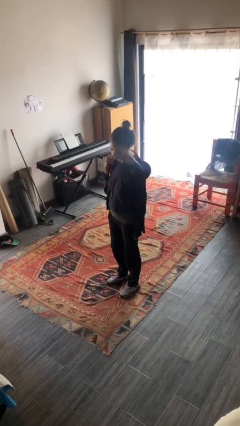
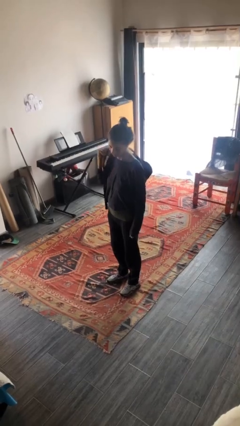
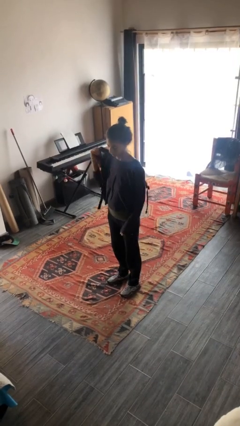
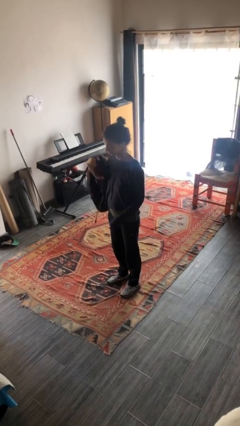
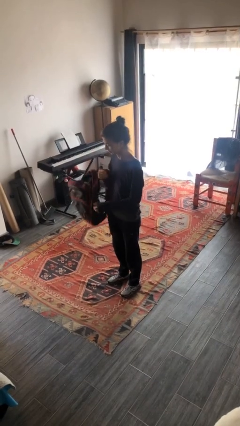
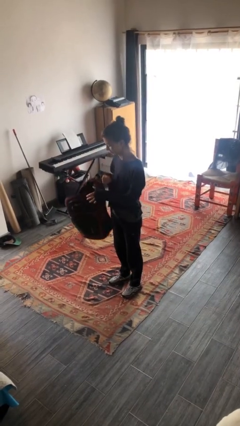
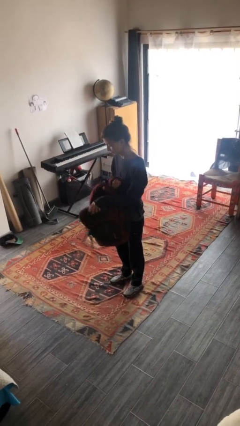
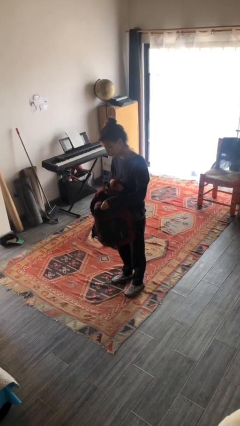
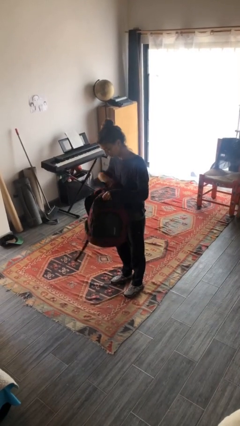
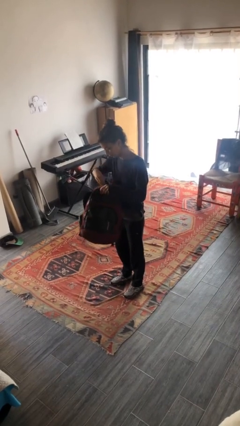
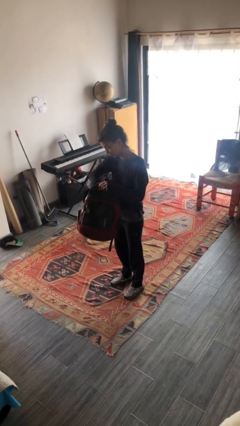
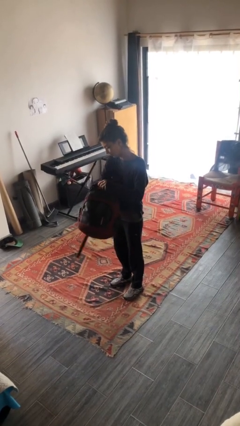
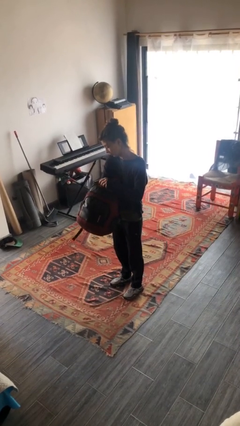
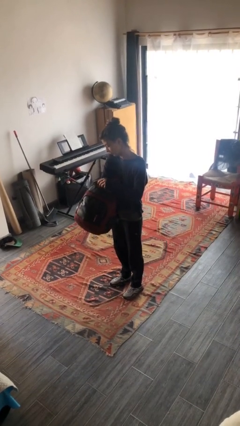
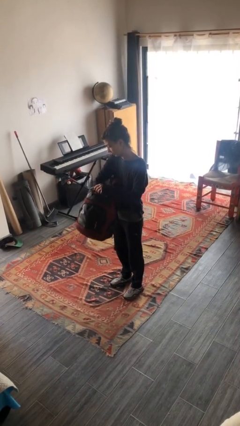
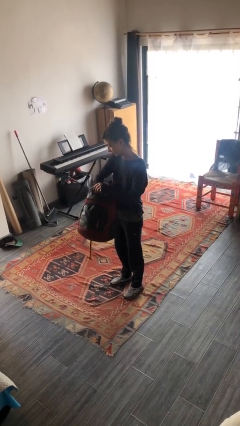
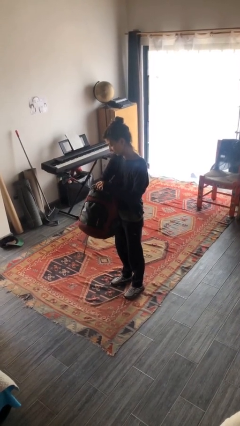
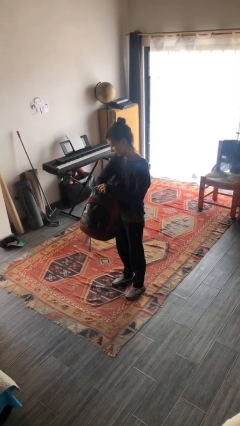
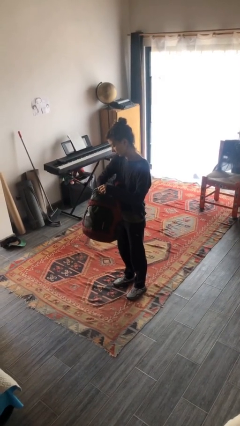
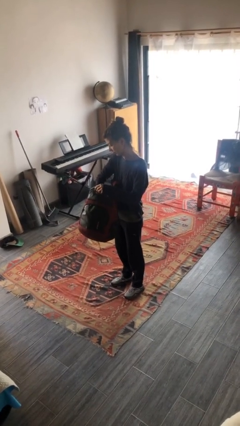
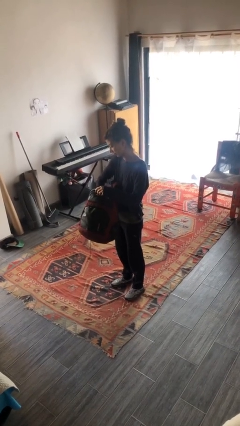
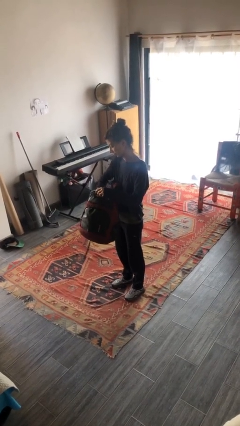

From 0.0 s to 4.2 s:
person searches in backpack

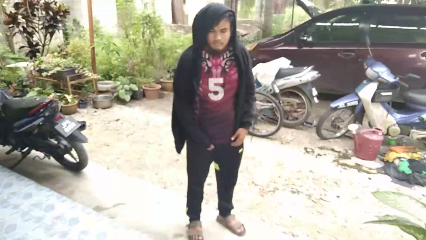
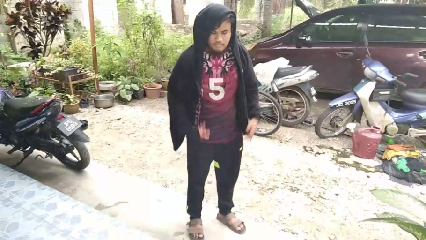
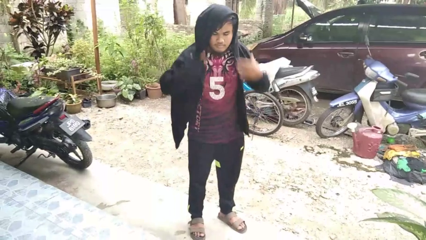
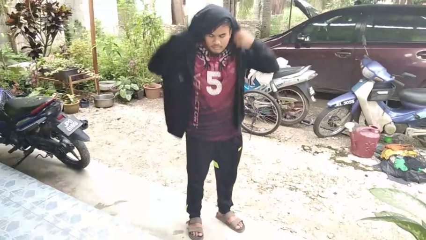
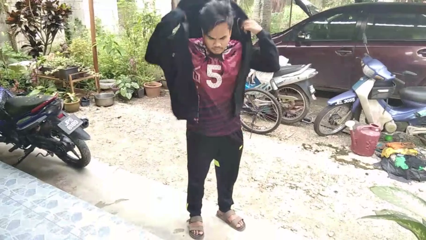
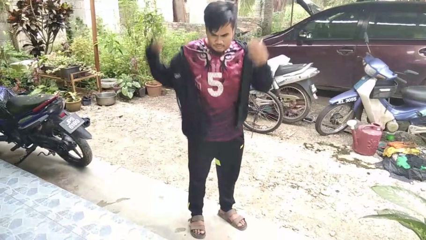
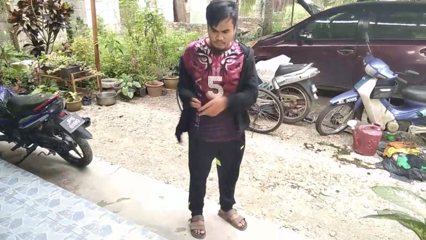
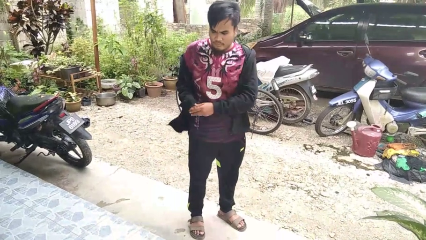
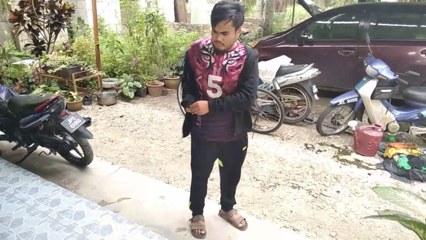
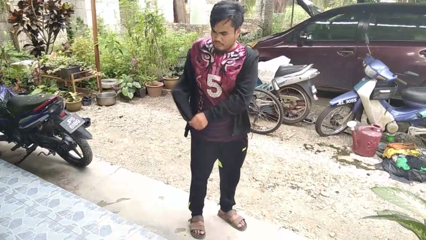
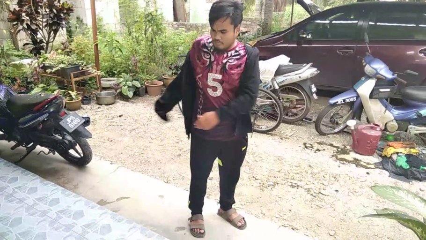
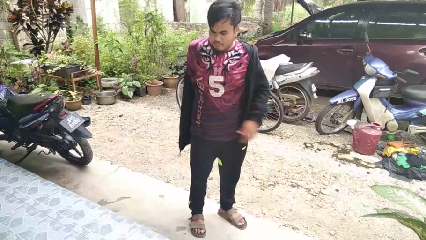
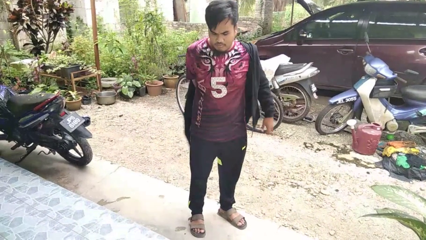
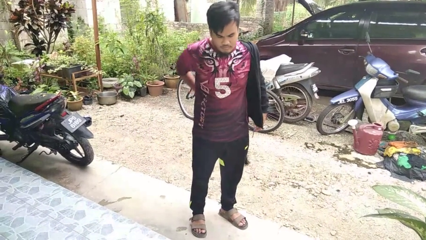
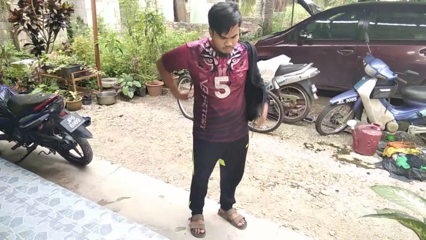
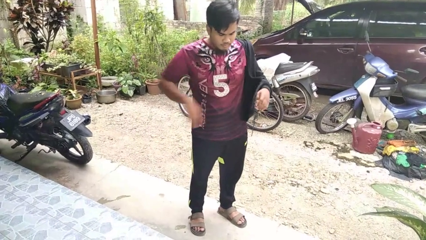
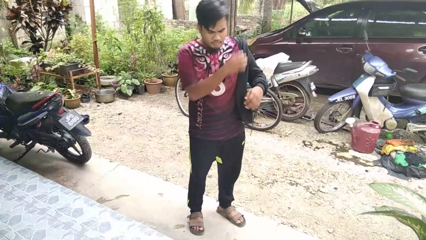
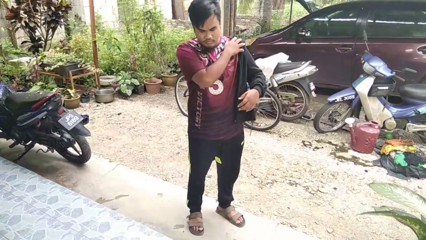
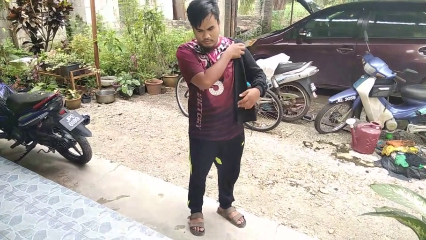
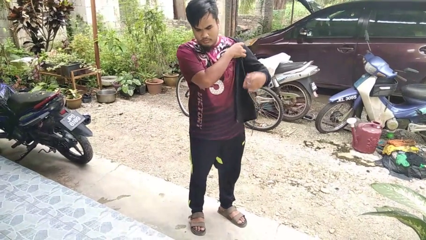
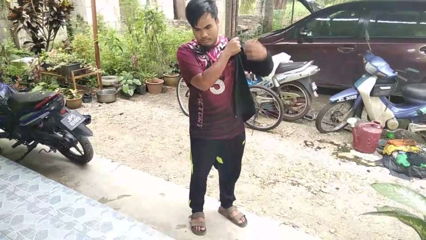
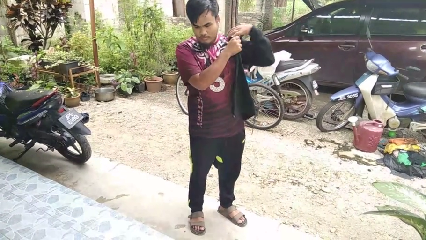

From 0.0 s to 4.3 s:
person takes off hoodie

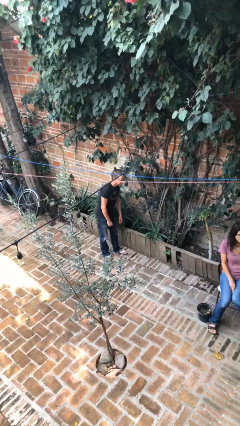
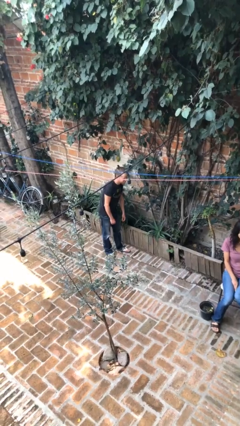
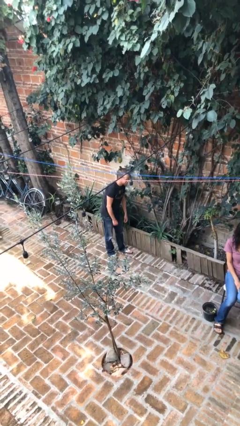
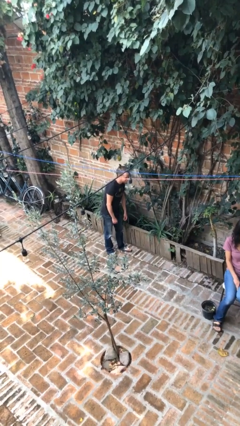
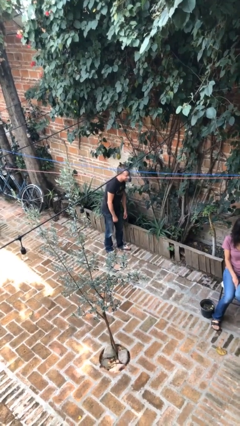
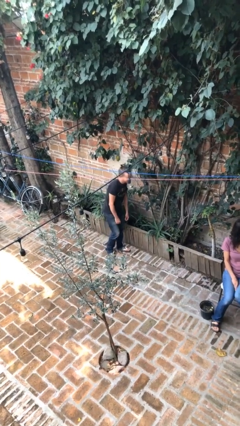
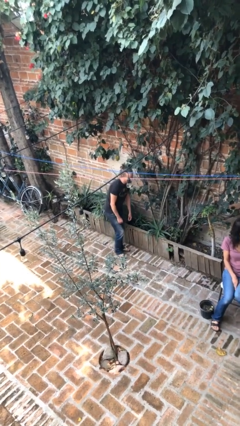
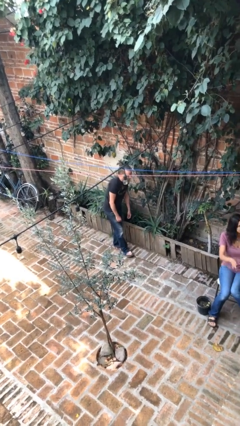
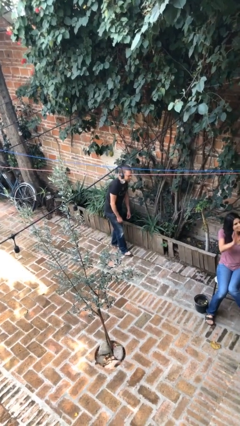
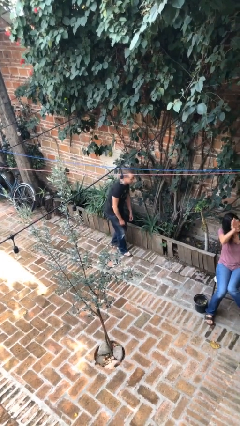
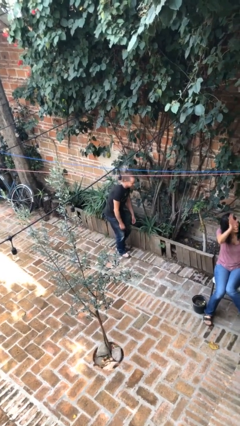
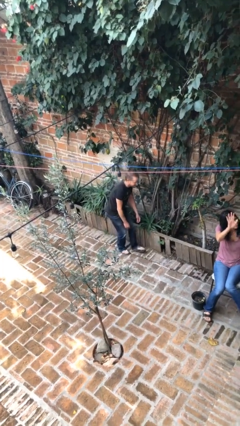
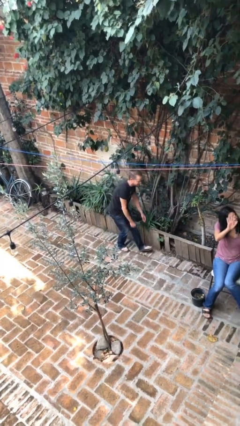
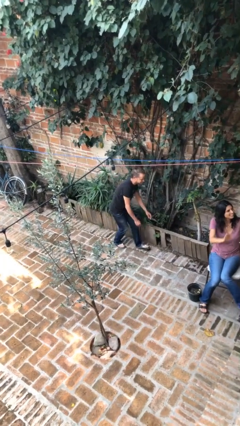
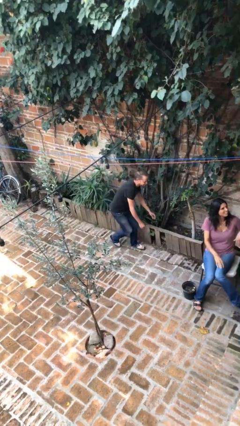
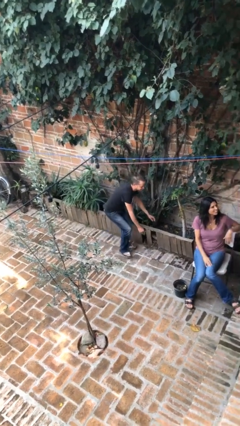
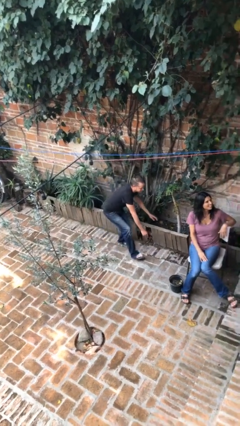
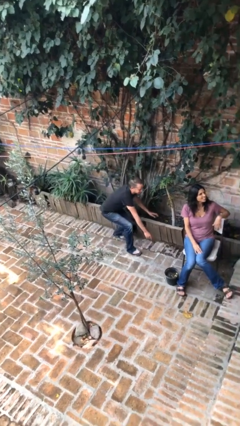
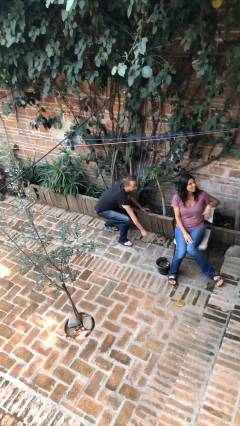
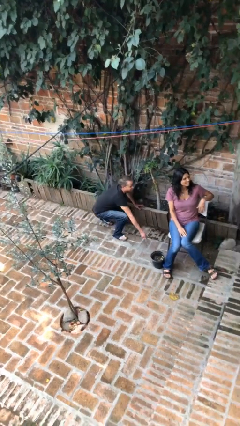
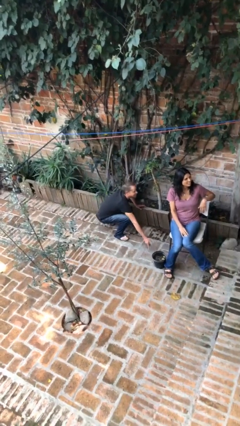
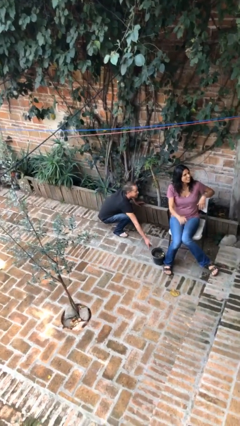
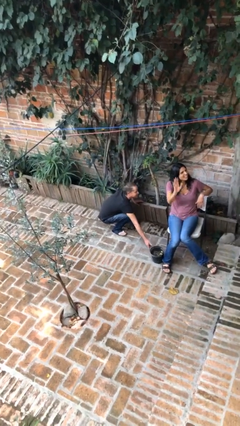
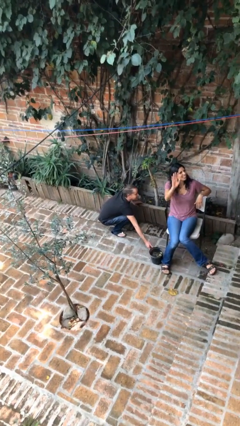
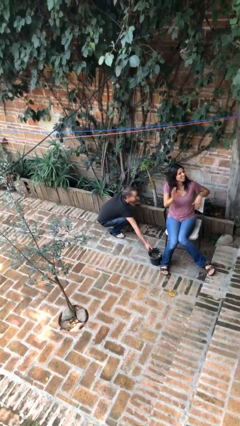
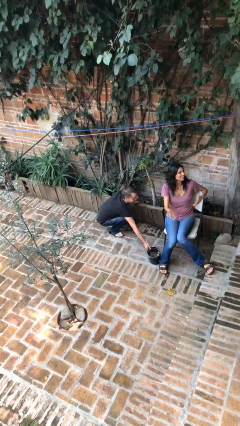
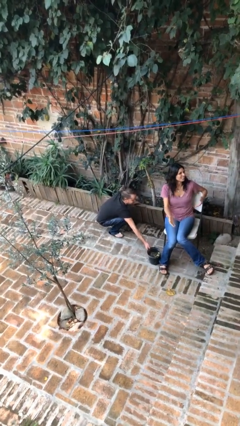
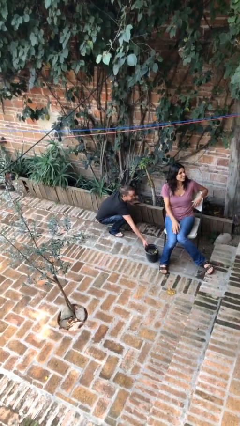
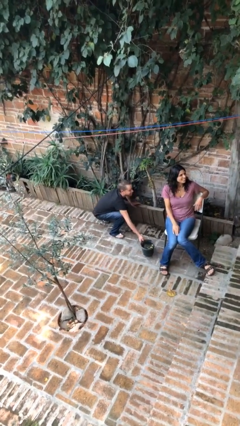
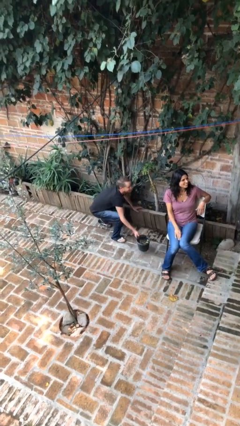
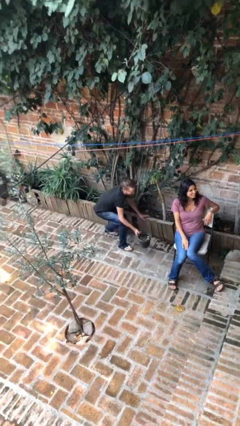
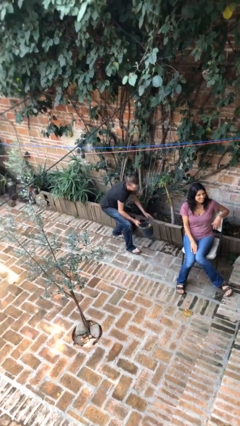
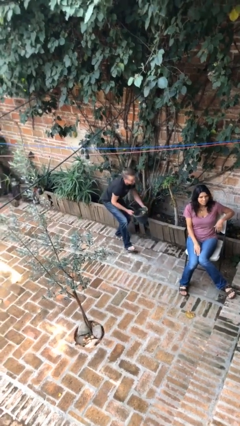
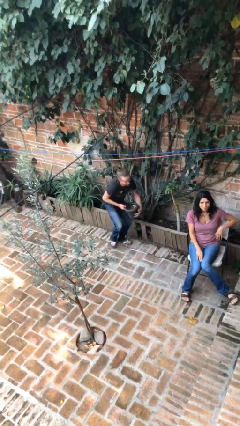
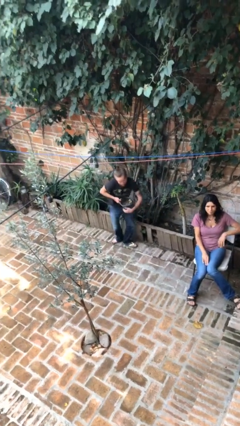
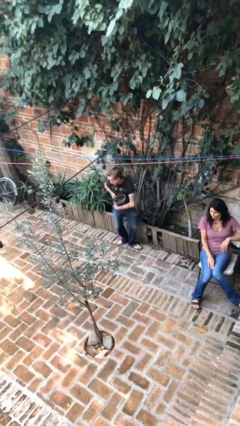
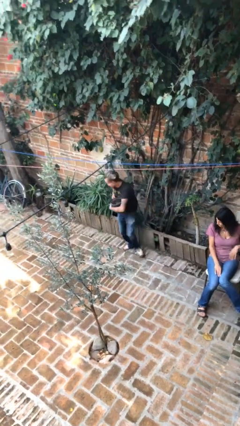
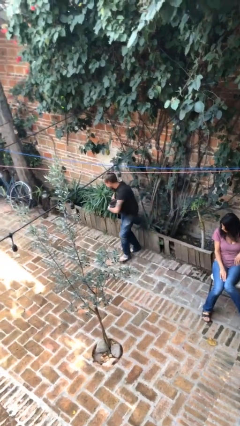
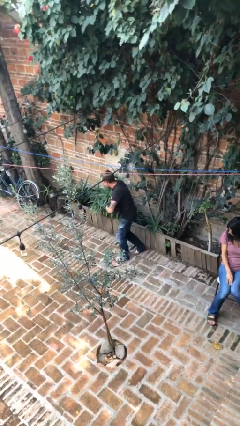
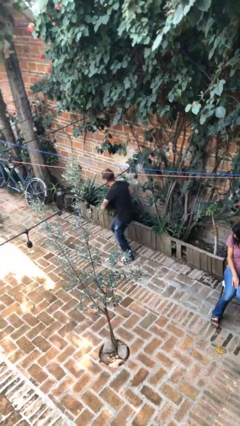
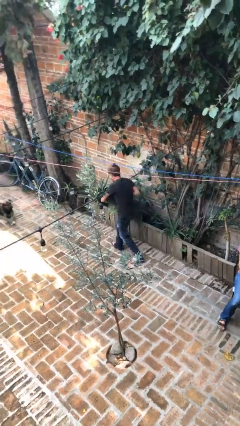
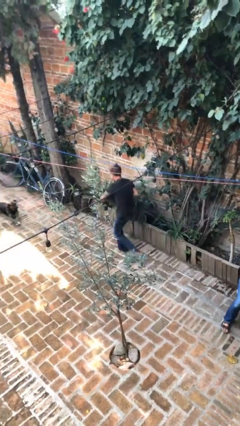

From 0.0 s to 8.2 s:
person steals object from person

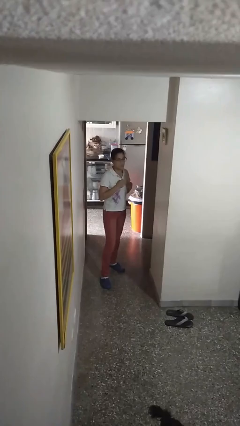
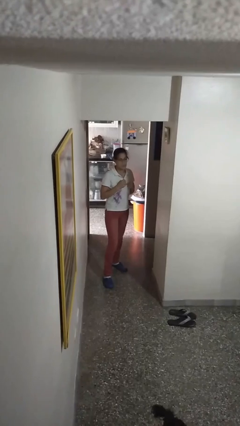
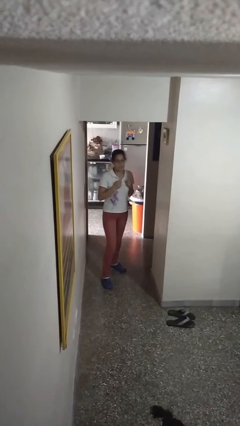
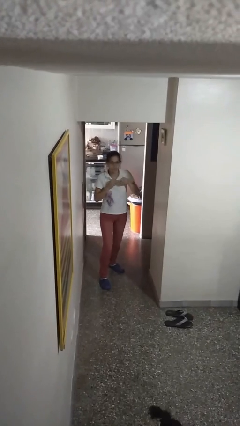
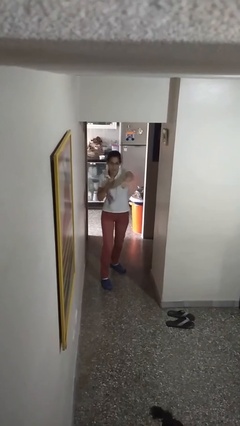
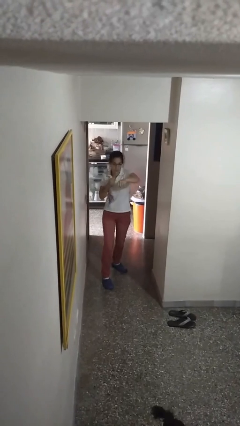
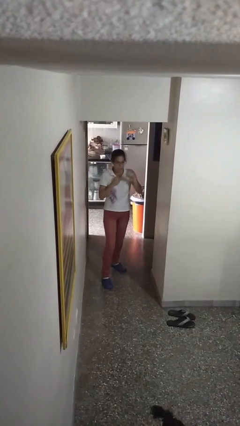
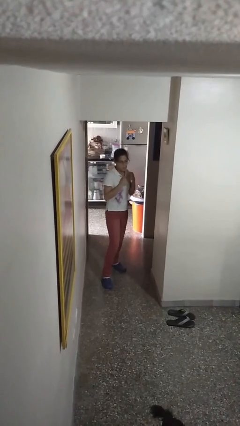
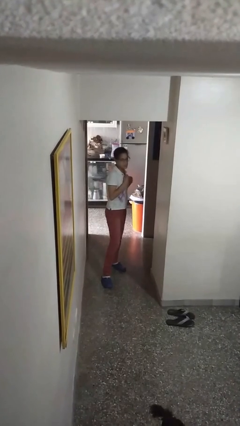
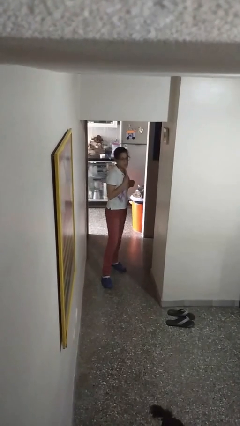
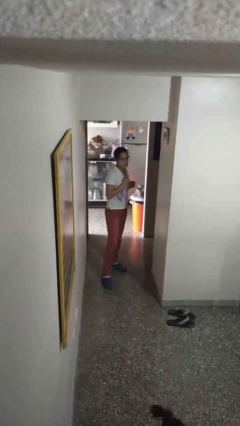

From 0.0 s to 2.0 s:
person karate chop
